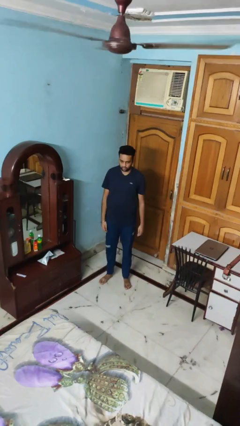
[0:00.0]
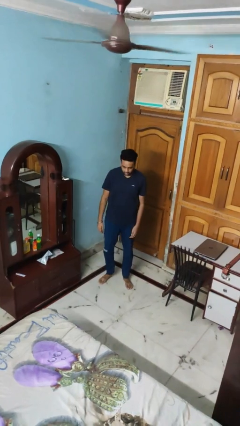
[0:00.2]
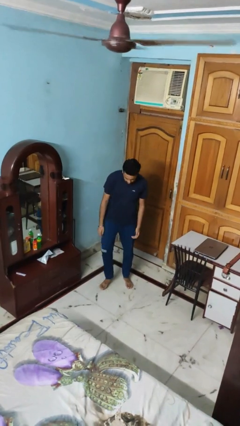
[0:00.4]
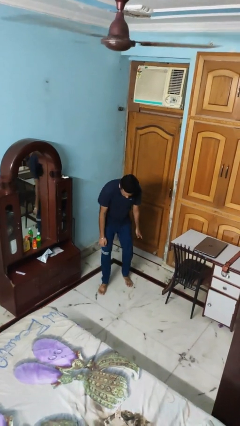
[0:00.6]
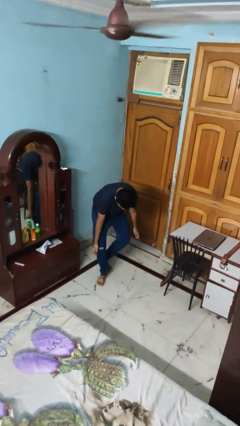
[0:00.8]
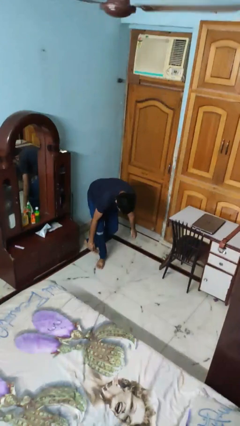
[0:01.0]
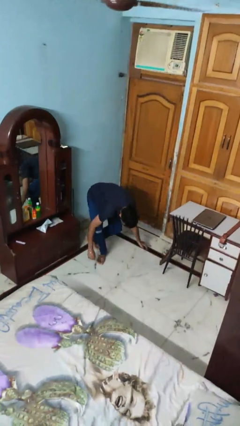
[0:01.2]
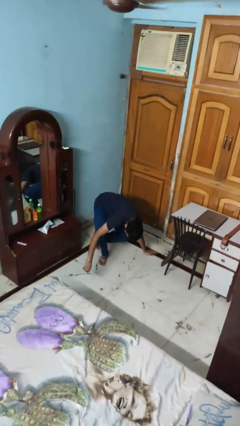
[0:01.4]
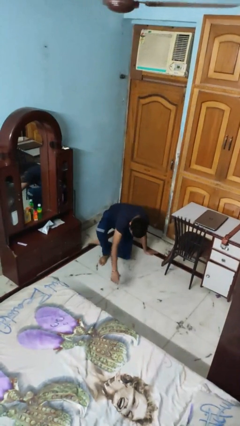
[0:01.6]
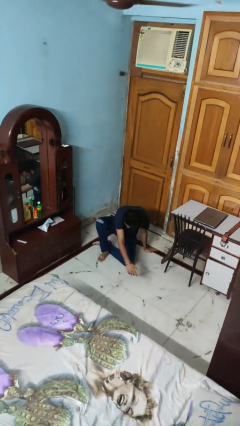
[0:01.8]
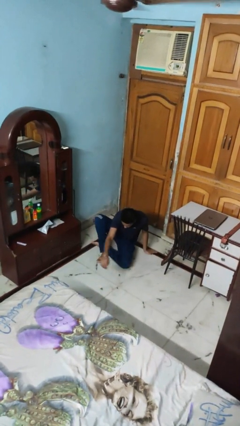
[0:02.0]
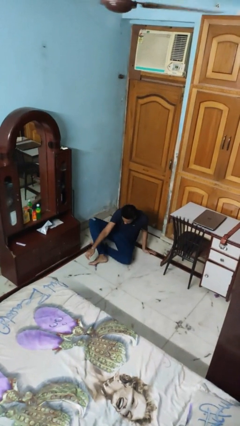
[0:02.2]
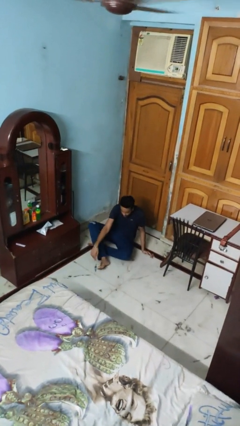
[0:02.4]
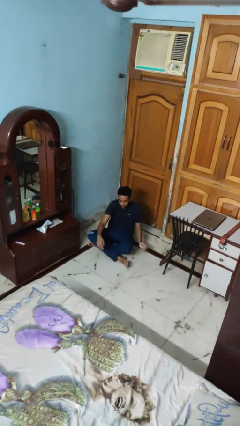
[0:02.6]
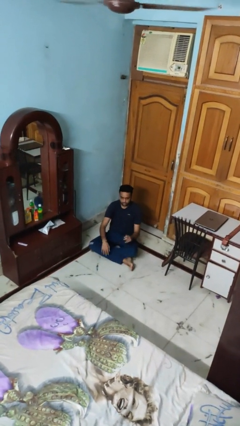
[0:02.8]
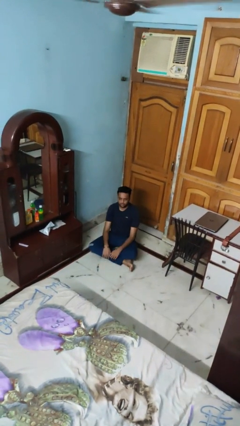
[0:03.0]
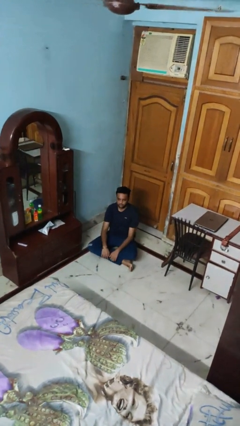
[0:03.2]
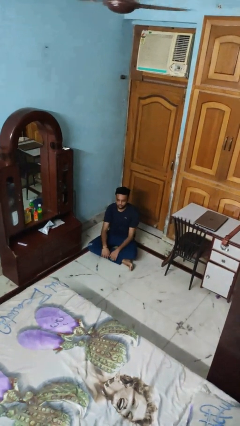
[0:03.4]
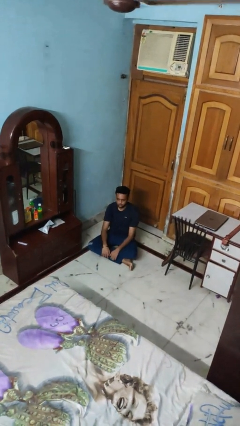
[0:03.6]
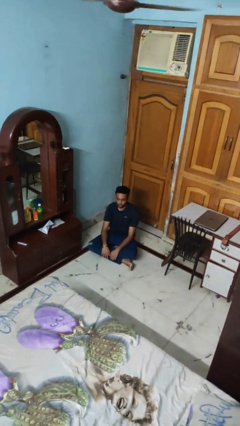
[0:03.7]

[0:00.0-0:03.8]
person sits crisscross

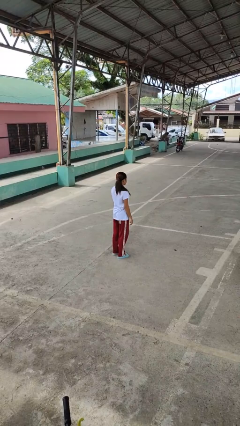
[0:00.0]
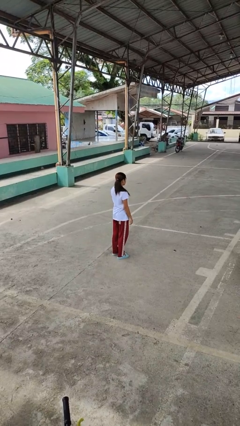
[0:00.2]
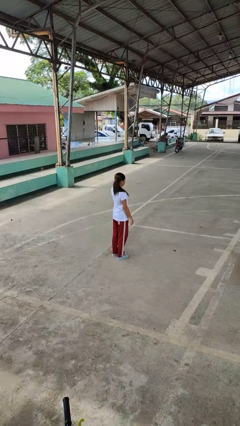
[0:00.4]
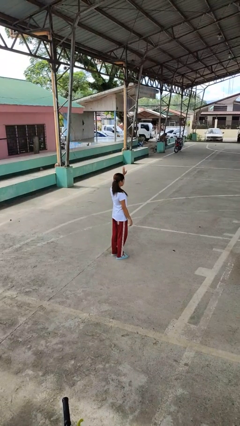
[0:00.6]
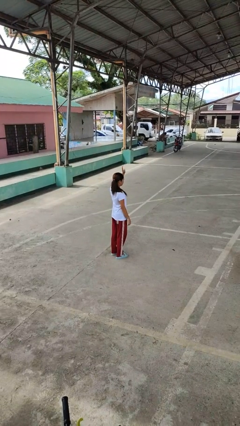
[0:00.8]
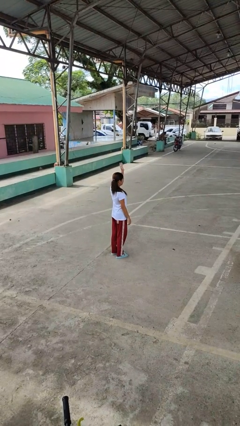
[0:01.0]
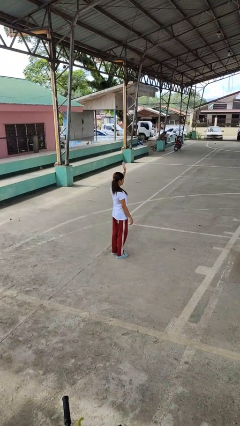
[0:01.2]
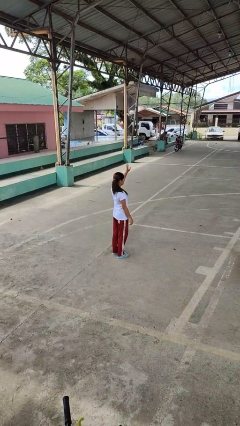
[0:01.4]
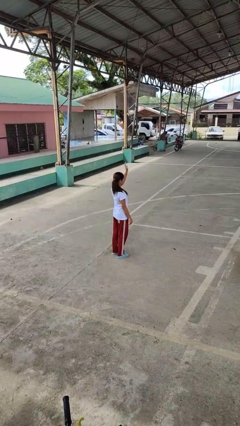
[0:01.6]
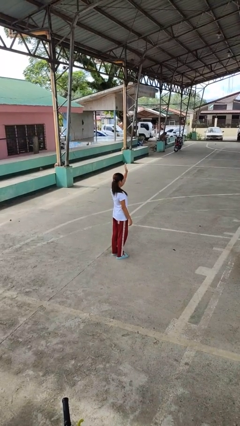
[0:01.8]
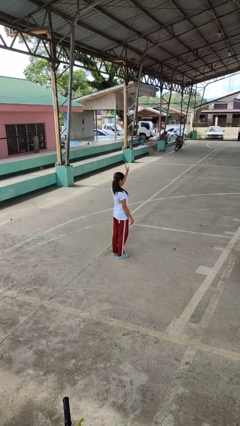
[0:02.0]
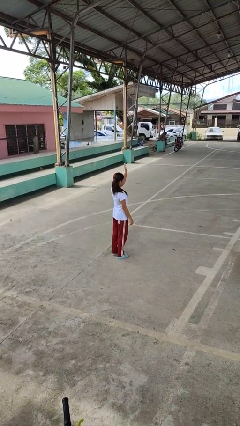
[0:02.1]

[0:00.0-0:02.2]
person waves at person

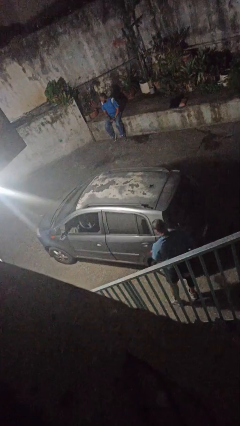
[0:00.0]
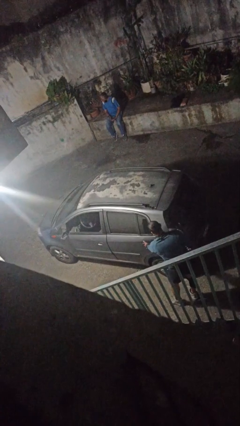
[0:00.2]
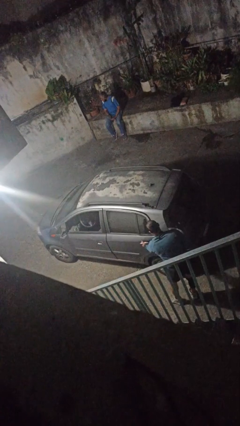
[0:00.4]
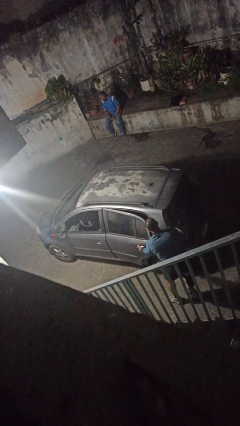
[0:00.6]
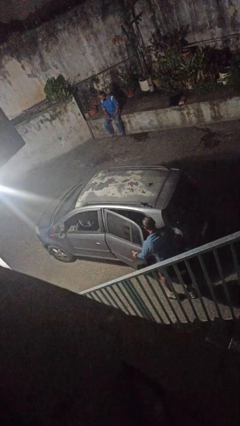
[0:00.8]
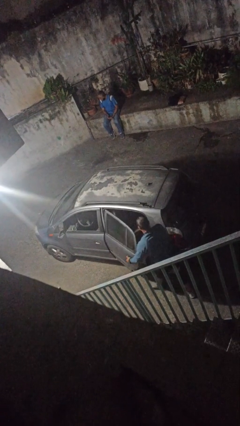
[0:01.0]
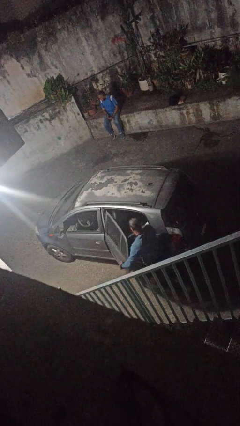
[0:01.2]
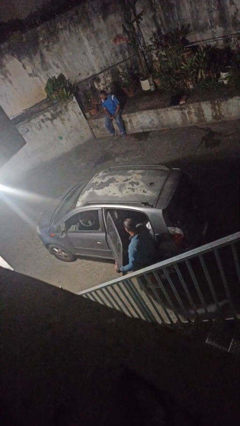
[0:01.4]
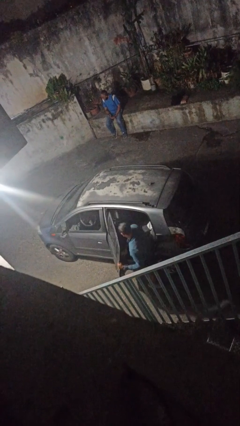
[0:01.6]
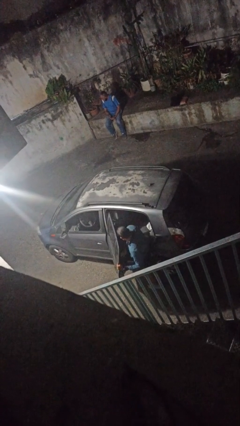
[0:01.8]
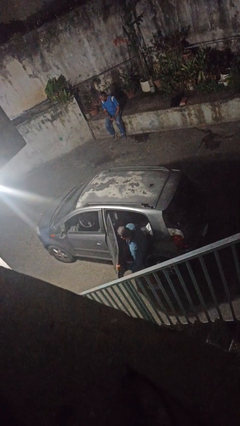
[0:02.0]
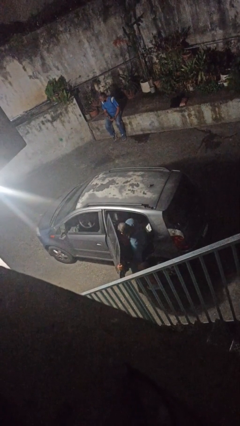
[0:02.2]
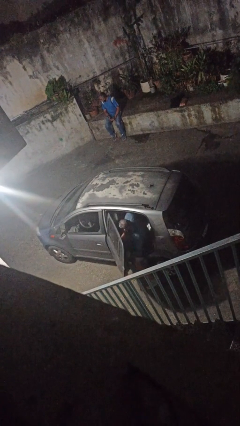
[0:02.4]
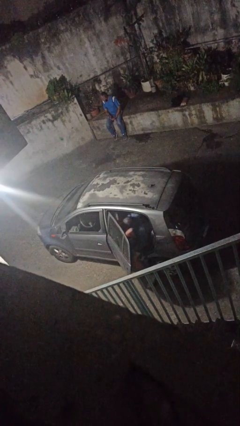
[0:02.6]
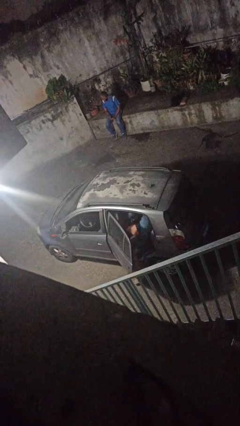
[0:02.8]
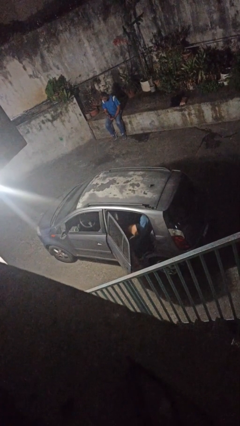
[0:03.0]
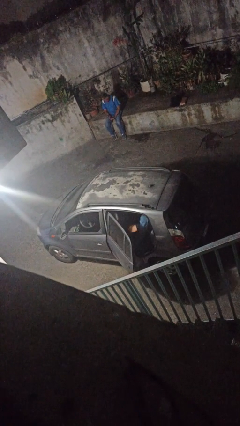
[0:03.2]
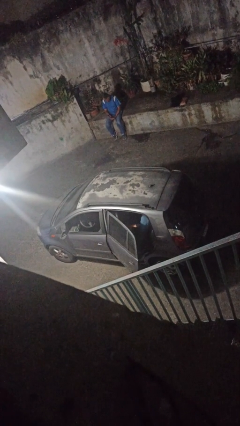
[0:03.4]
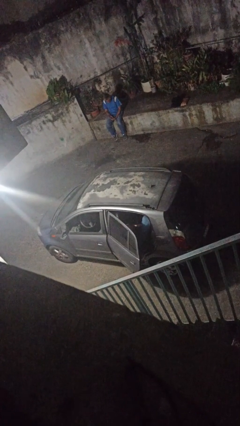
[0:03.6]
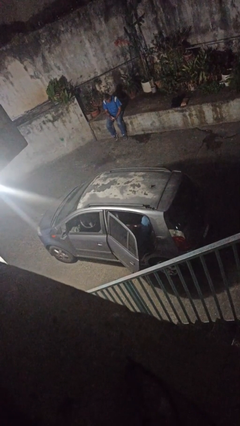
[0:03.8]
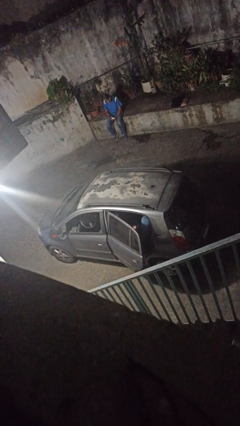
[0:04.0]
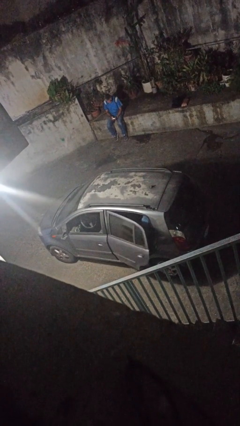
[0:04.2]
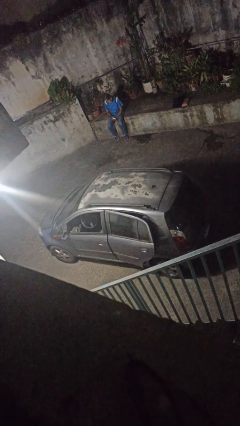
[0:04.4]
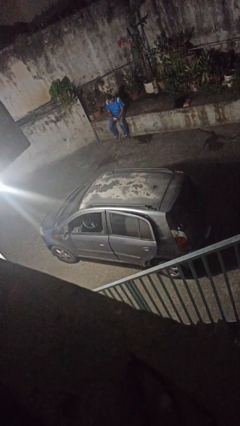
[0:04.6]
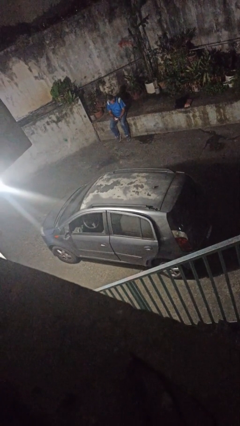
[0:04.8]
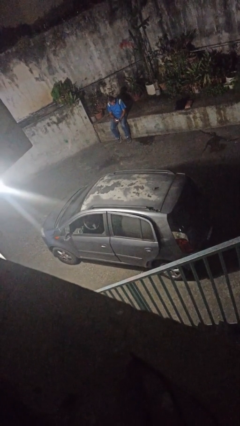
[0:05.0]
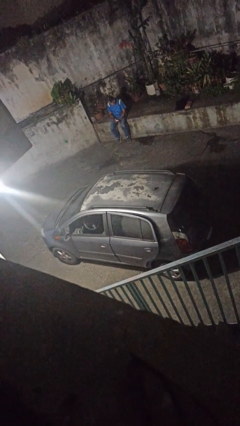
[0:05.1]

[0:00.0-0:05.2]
car picks up person

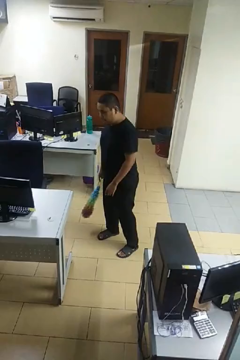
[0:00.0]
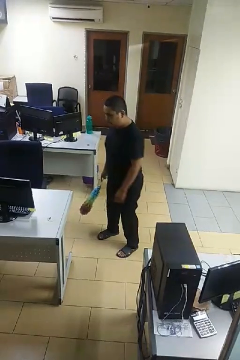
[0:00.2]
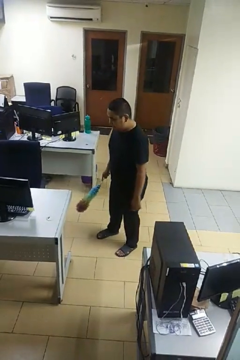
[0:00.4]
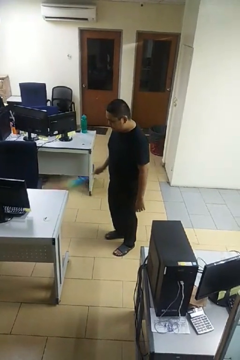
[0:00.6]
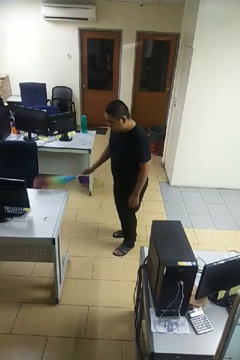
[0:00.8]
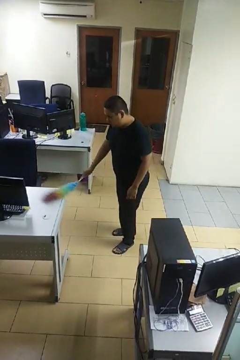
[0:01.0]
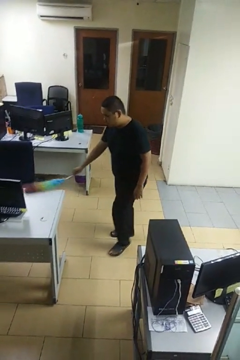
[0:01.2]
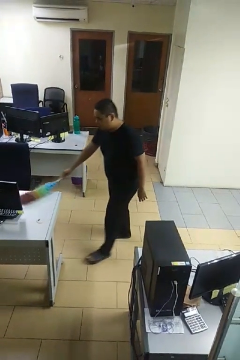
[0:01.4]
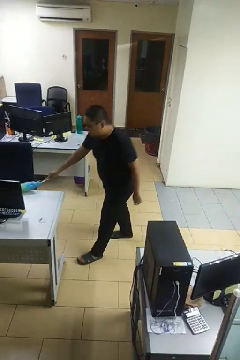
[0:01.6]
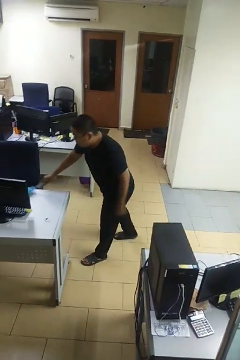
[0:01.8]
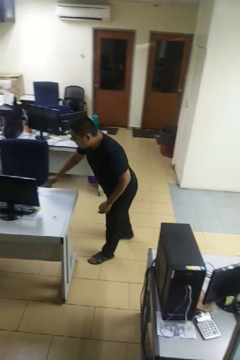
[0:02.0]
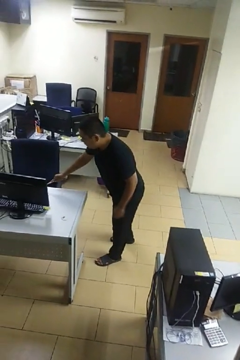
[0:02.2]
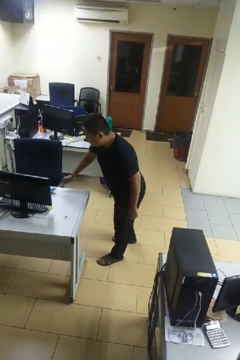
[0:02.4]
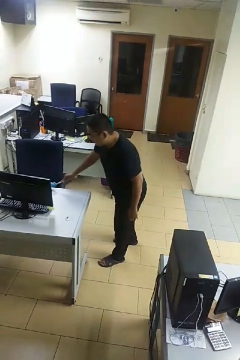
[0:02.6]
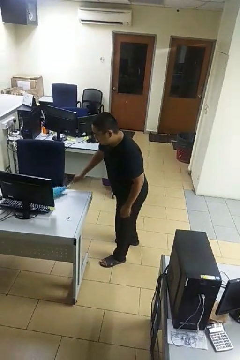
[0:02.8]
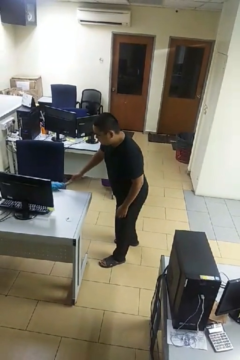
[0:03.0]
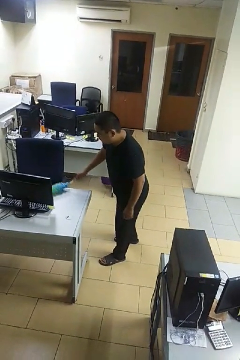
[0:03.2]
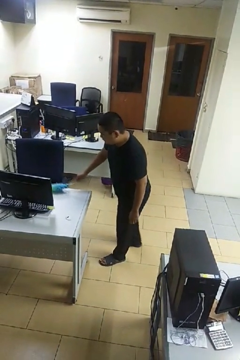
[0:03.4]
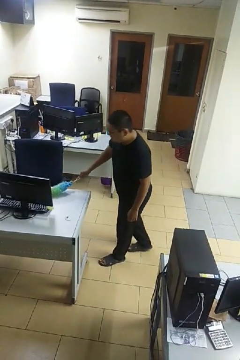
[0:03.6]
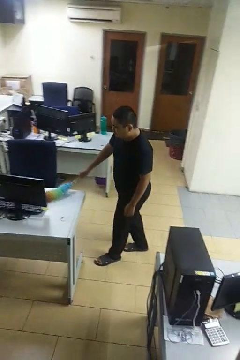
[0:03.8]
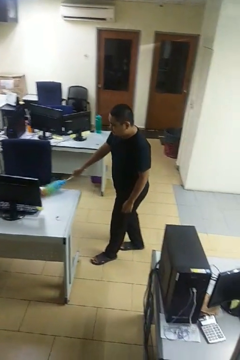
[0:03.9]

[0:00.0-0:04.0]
person dusts furniture

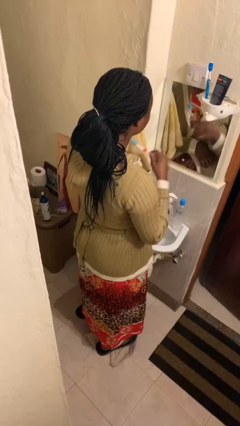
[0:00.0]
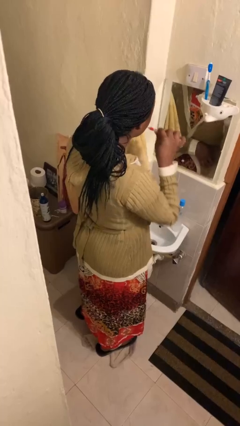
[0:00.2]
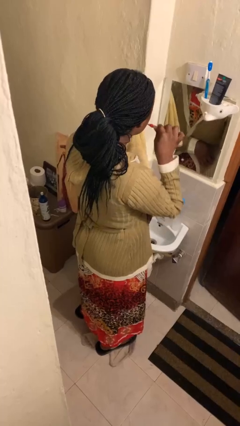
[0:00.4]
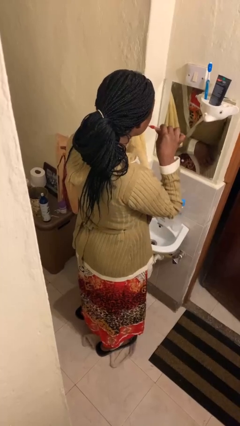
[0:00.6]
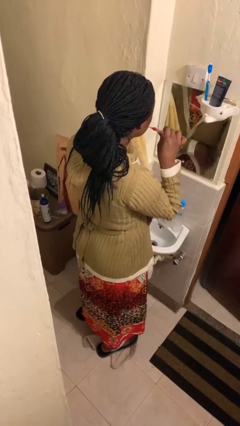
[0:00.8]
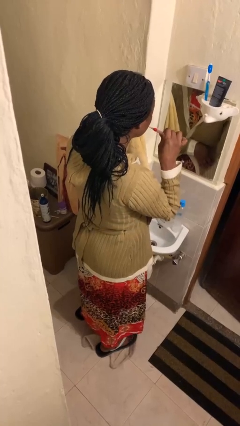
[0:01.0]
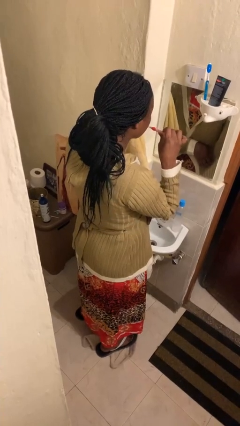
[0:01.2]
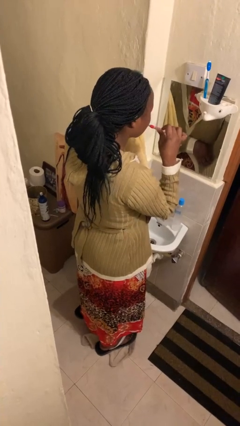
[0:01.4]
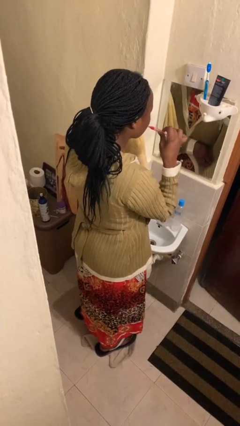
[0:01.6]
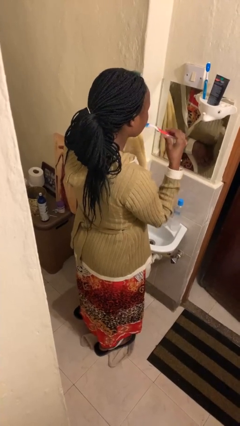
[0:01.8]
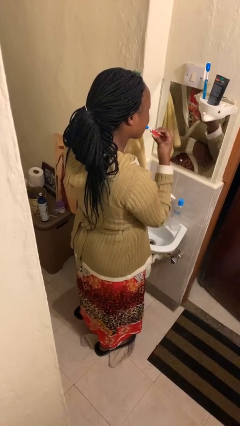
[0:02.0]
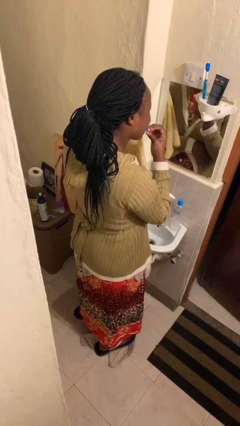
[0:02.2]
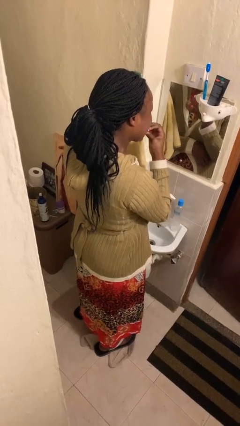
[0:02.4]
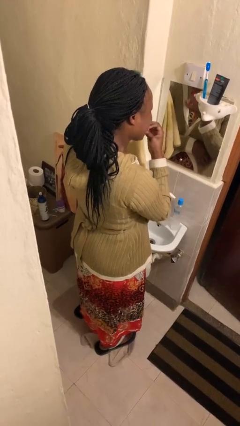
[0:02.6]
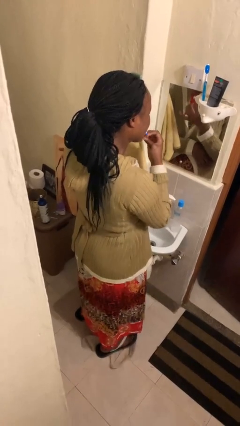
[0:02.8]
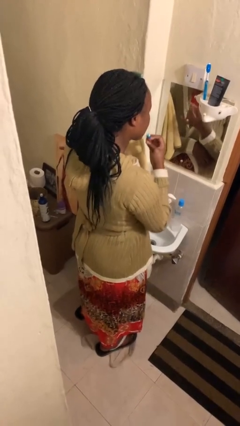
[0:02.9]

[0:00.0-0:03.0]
person brushes teeth
